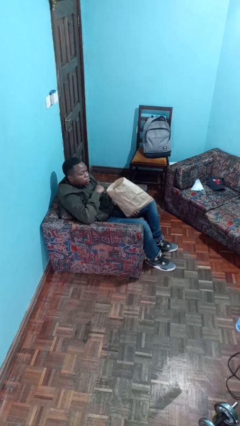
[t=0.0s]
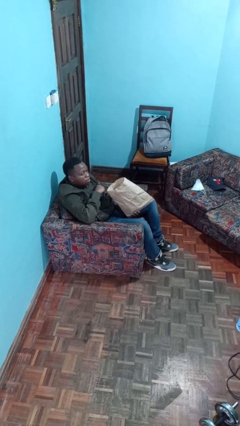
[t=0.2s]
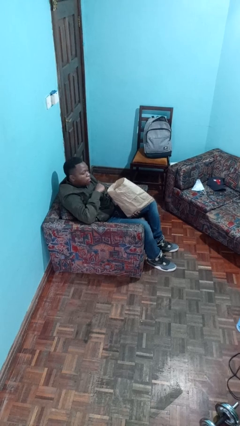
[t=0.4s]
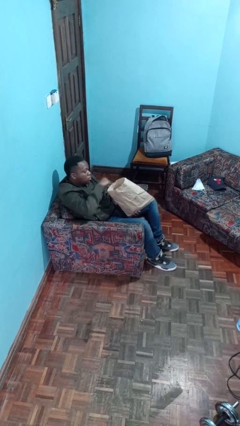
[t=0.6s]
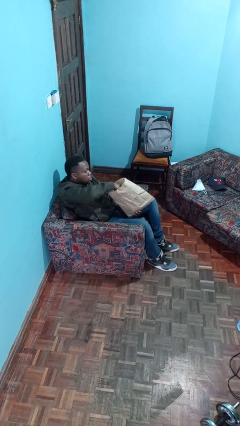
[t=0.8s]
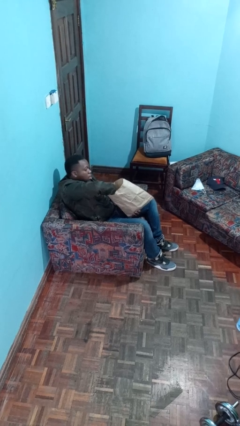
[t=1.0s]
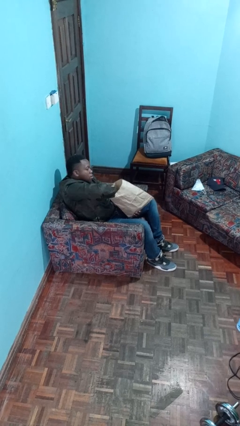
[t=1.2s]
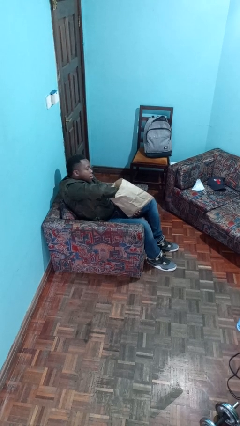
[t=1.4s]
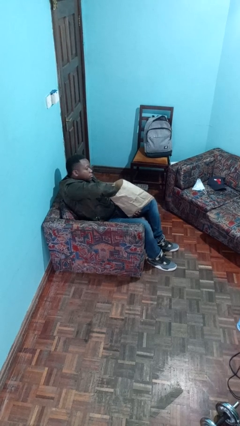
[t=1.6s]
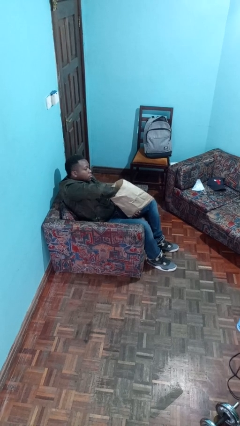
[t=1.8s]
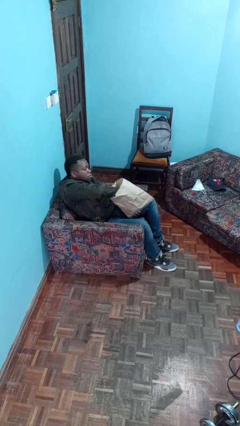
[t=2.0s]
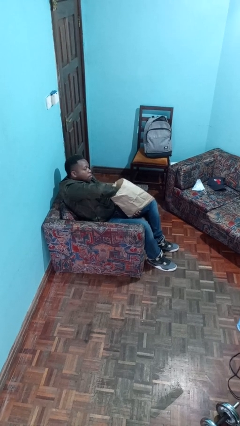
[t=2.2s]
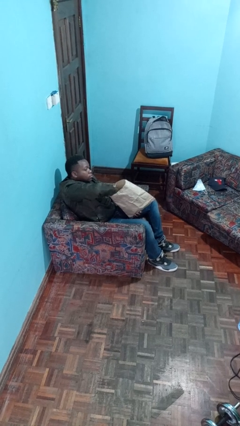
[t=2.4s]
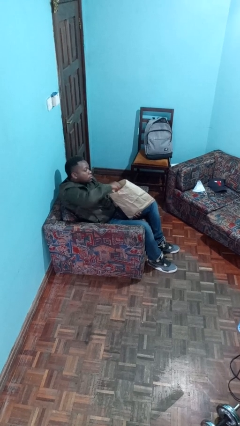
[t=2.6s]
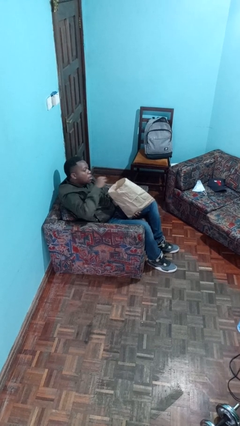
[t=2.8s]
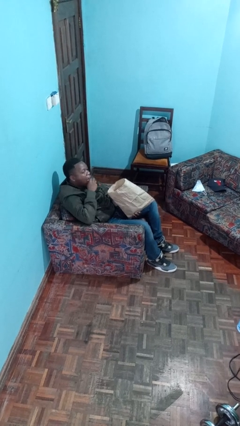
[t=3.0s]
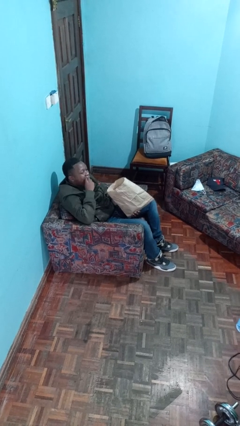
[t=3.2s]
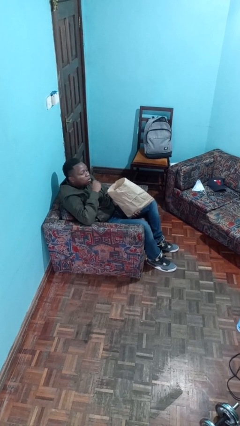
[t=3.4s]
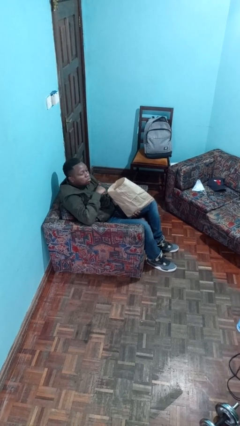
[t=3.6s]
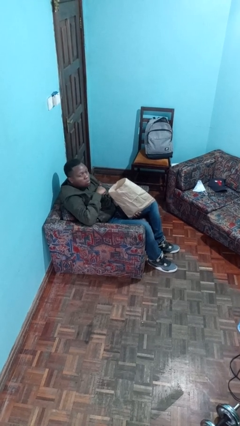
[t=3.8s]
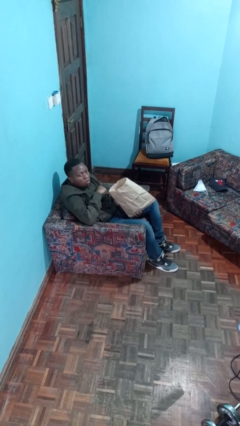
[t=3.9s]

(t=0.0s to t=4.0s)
person eats snack from bag

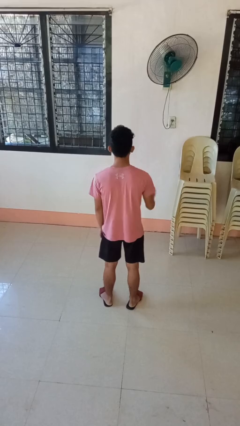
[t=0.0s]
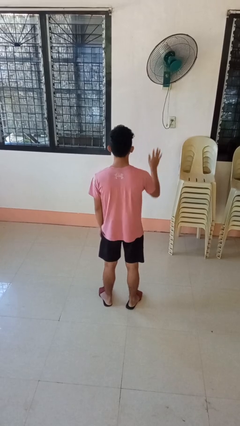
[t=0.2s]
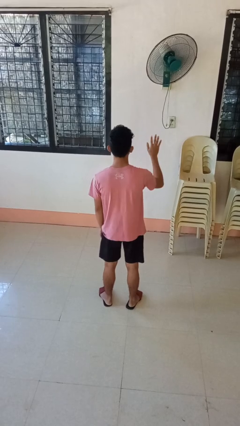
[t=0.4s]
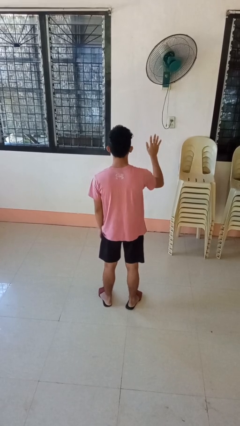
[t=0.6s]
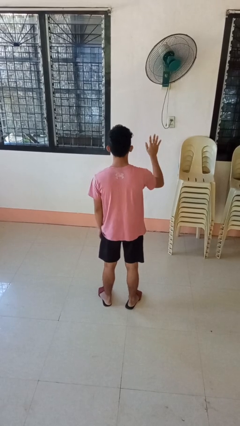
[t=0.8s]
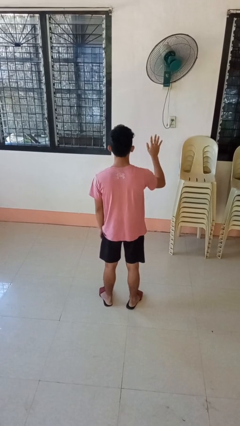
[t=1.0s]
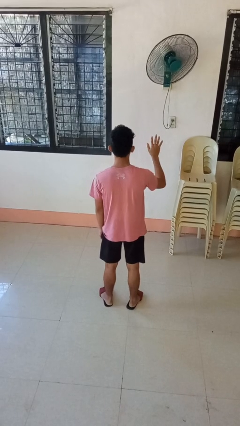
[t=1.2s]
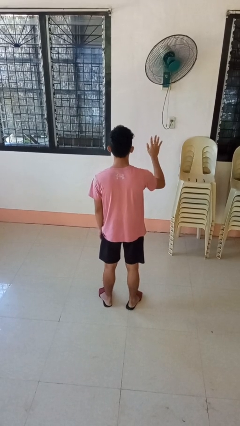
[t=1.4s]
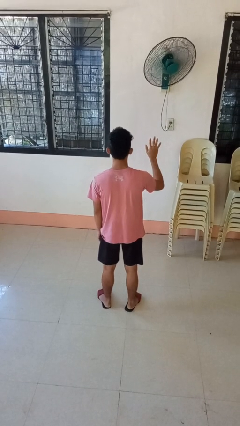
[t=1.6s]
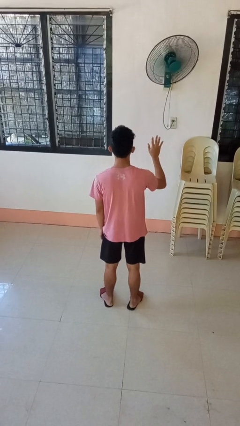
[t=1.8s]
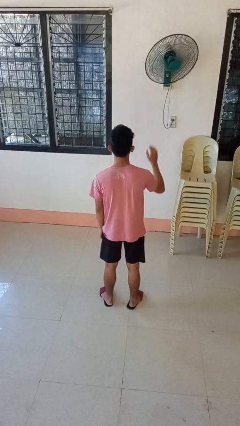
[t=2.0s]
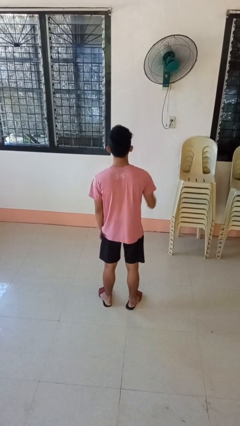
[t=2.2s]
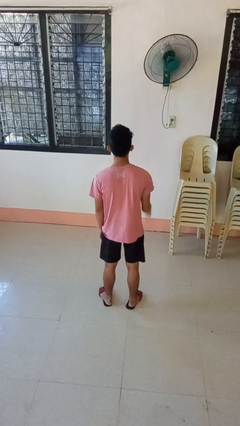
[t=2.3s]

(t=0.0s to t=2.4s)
person gestures number five

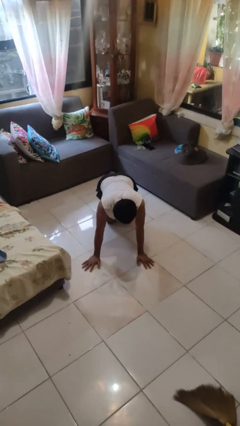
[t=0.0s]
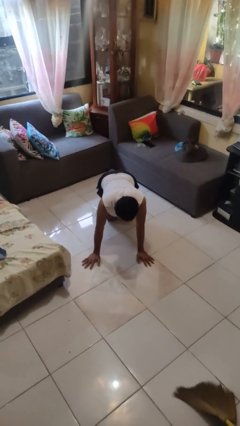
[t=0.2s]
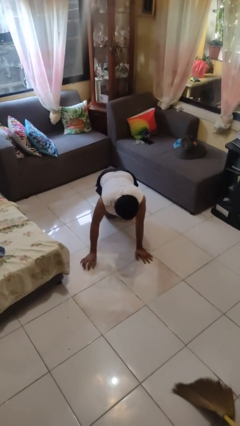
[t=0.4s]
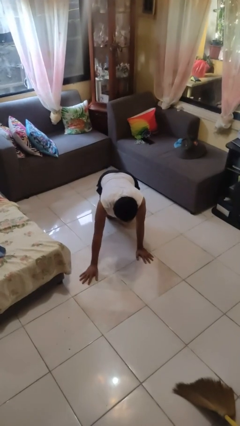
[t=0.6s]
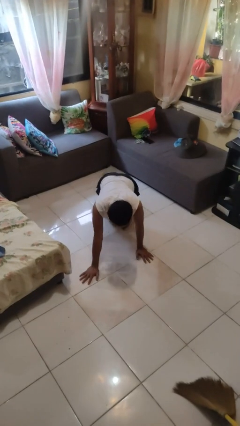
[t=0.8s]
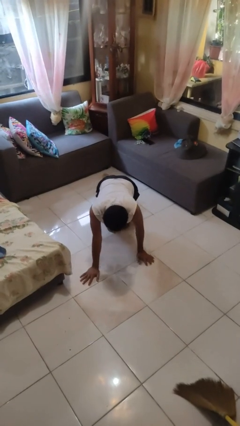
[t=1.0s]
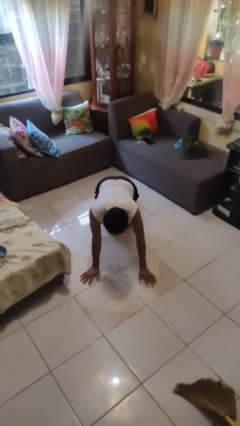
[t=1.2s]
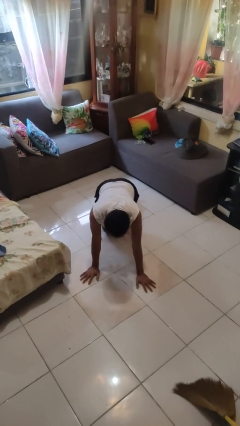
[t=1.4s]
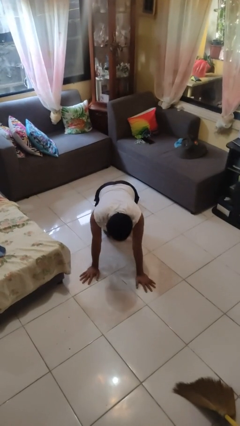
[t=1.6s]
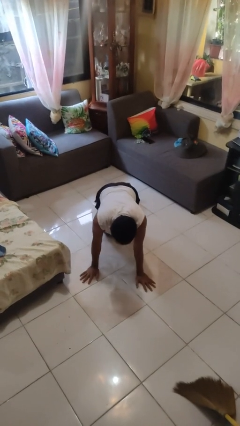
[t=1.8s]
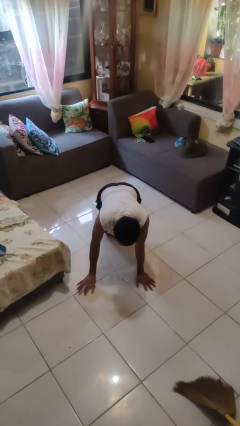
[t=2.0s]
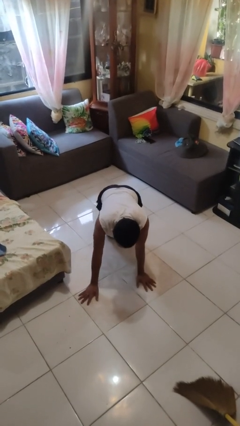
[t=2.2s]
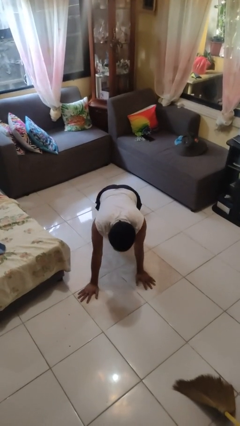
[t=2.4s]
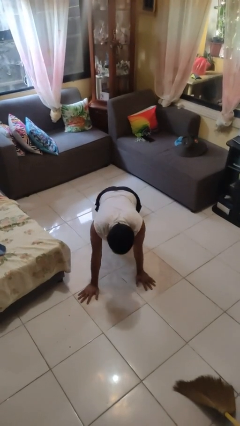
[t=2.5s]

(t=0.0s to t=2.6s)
person crawls

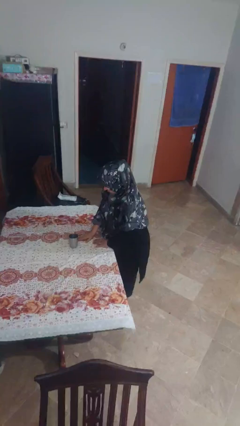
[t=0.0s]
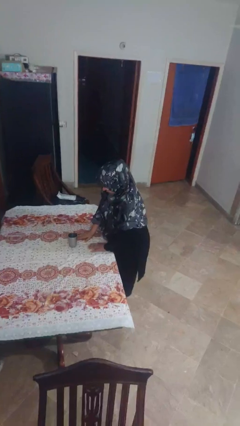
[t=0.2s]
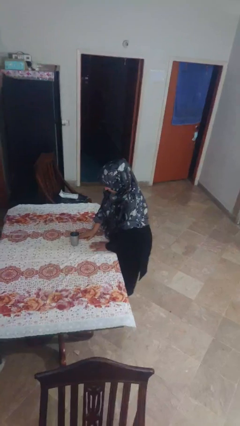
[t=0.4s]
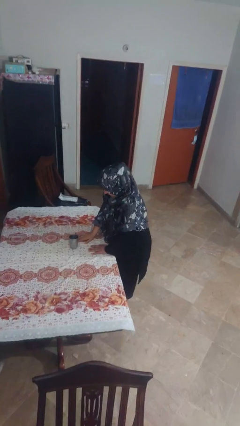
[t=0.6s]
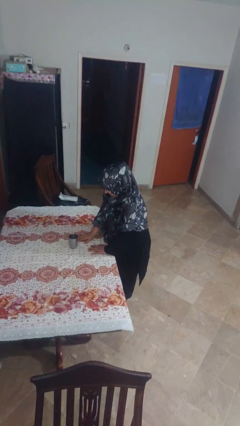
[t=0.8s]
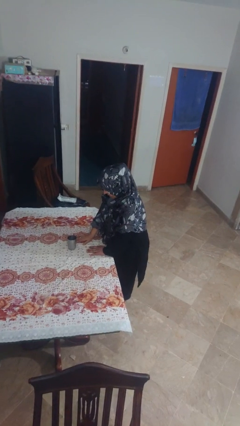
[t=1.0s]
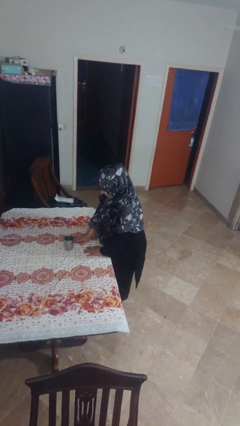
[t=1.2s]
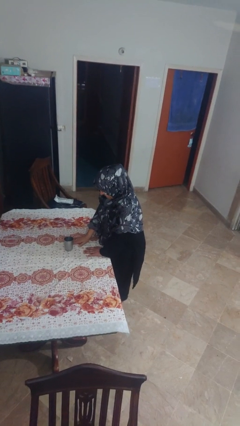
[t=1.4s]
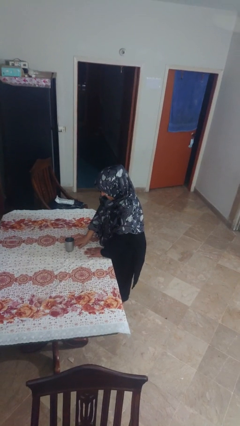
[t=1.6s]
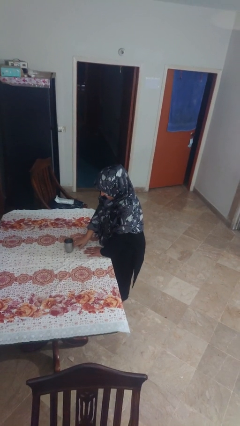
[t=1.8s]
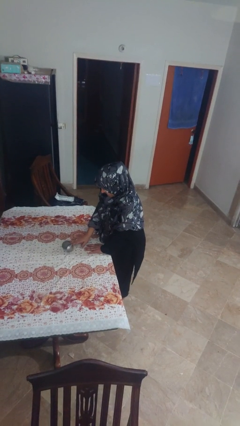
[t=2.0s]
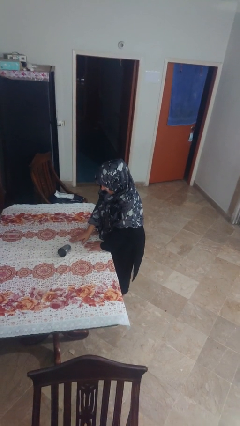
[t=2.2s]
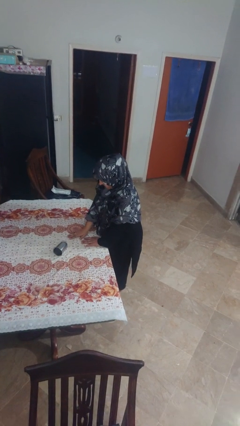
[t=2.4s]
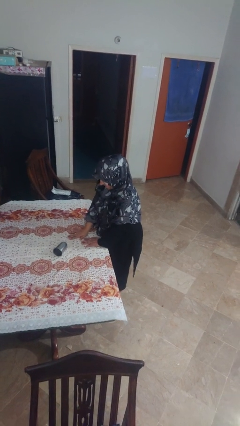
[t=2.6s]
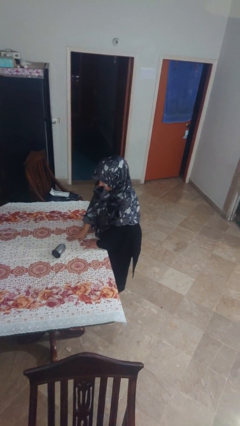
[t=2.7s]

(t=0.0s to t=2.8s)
person knocks over glass

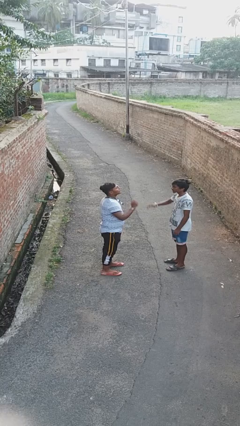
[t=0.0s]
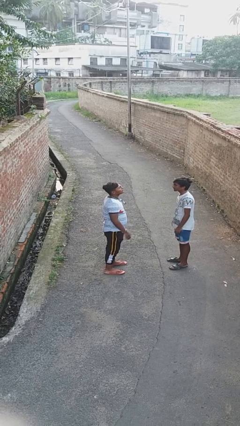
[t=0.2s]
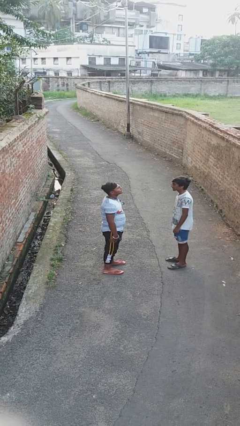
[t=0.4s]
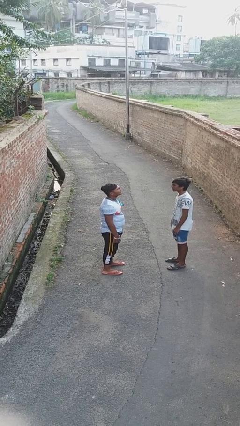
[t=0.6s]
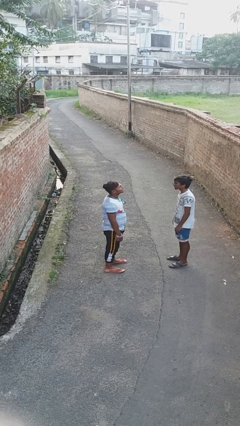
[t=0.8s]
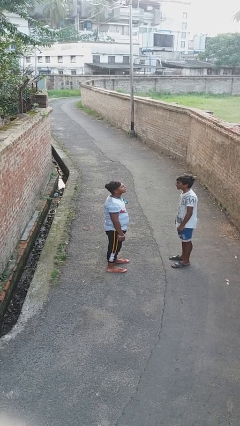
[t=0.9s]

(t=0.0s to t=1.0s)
person highfives hand

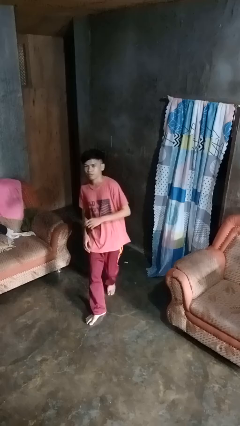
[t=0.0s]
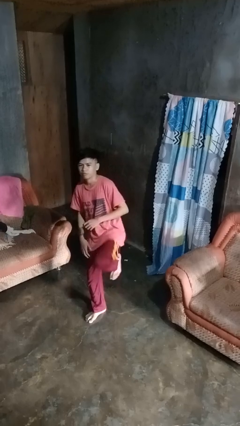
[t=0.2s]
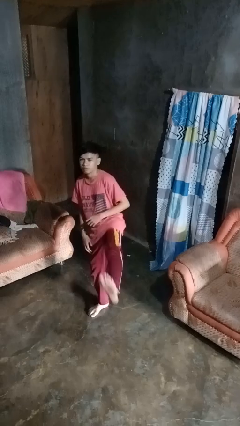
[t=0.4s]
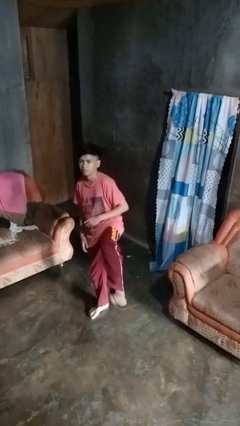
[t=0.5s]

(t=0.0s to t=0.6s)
person karate kicks

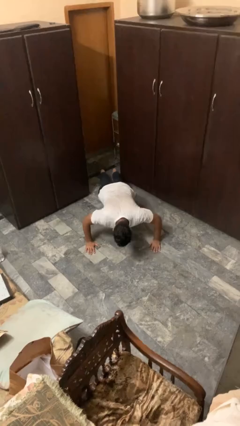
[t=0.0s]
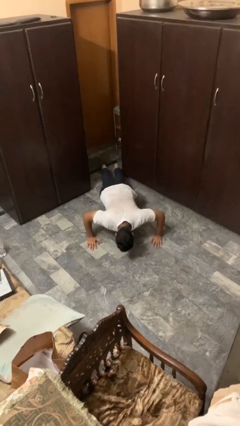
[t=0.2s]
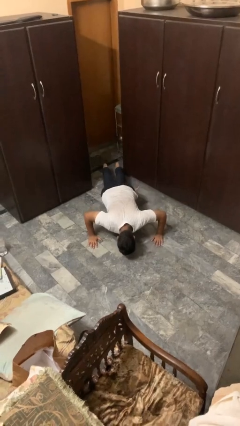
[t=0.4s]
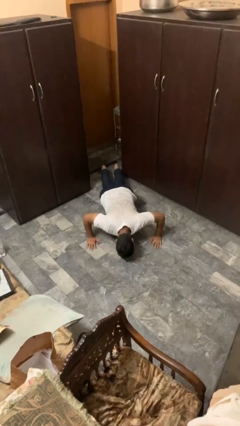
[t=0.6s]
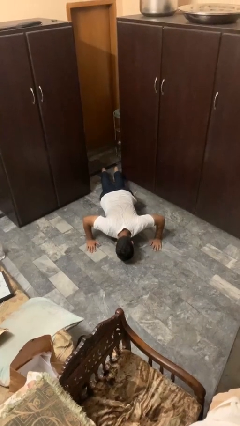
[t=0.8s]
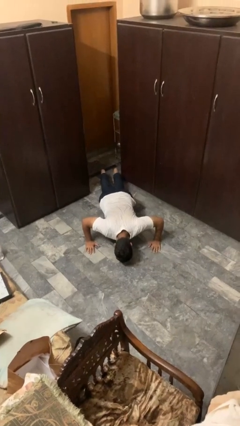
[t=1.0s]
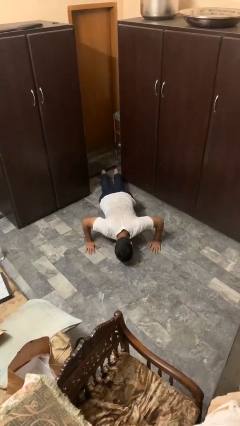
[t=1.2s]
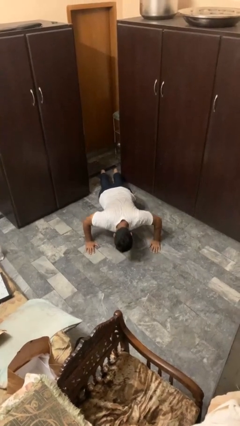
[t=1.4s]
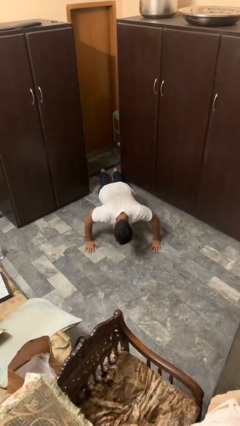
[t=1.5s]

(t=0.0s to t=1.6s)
person exercises with pushup

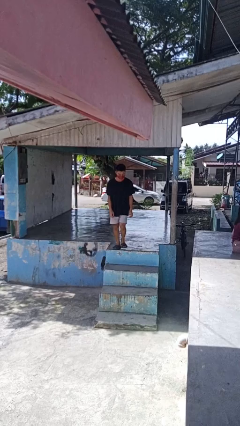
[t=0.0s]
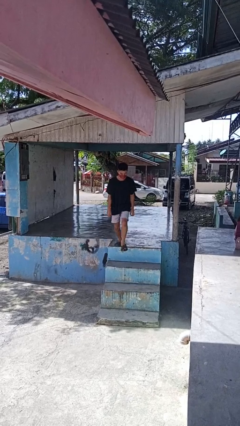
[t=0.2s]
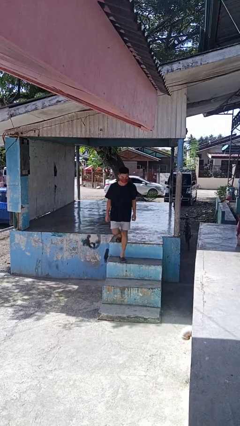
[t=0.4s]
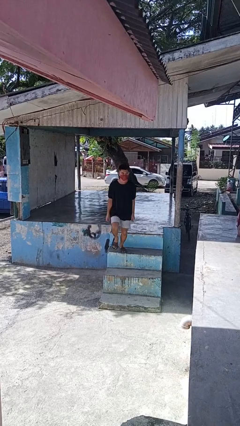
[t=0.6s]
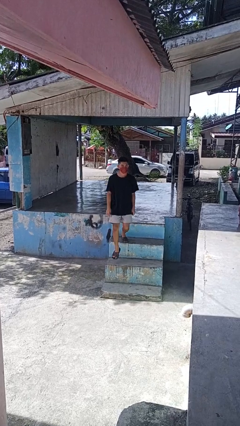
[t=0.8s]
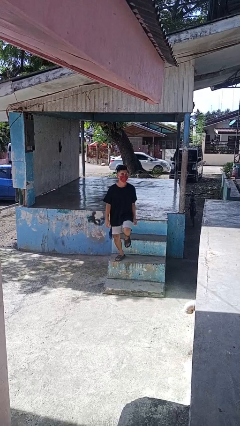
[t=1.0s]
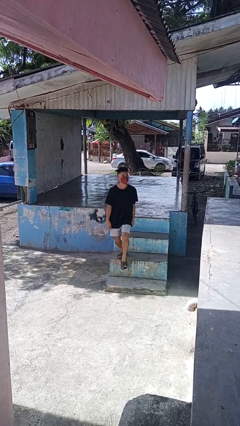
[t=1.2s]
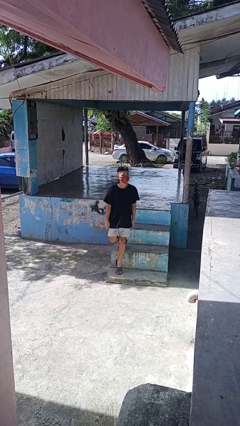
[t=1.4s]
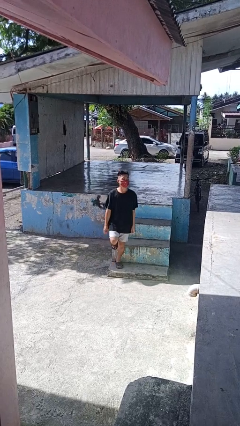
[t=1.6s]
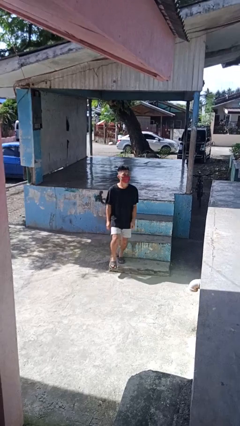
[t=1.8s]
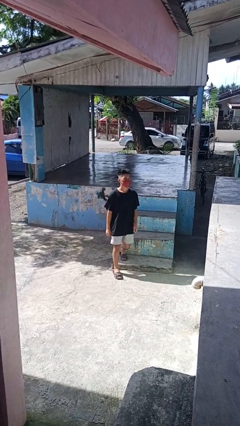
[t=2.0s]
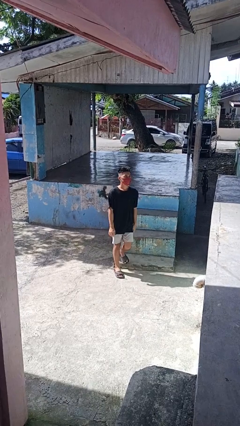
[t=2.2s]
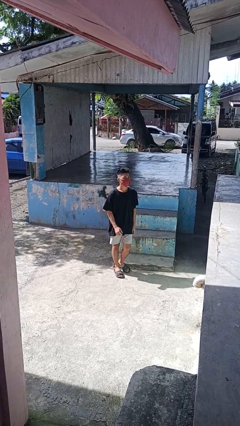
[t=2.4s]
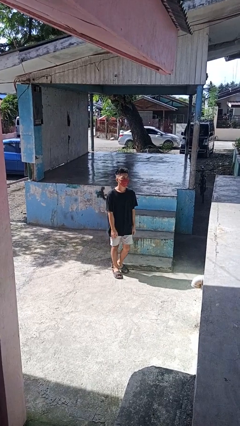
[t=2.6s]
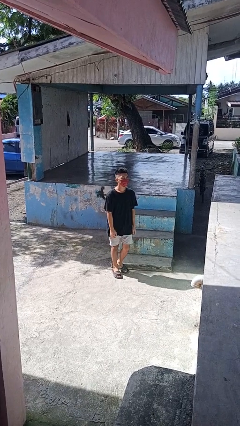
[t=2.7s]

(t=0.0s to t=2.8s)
person climbs down stairs
